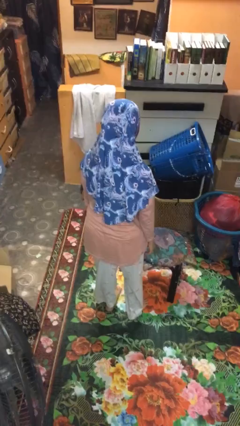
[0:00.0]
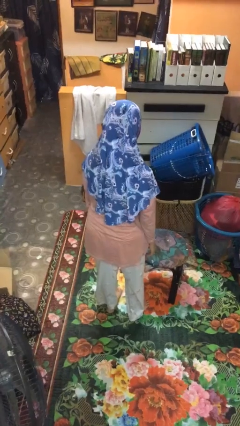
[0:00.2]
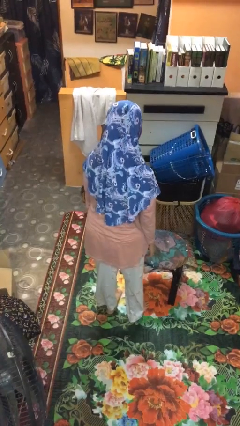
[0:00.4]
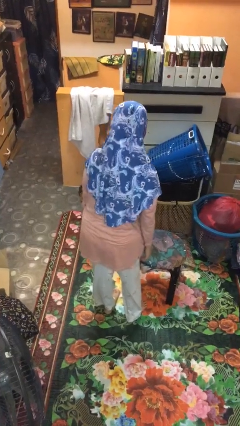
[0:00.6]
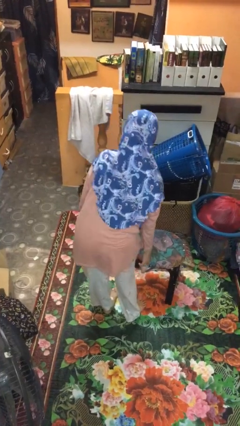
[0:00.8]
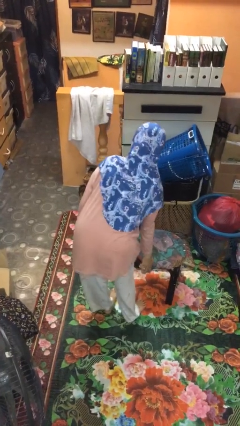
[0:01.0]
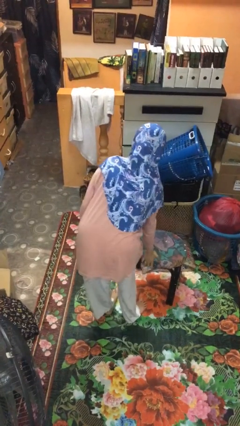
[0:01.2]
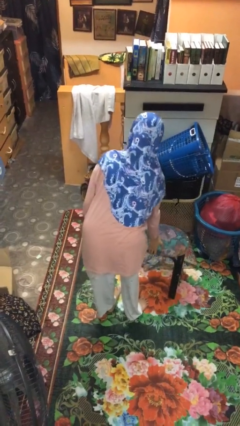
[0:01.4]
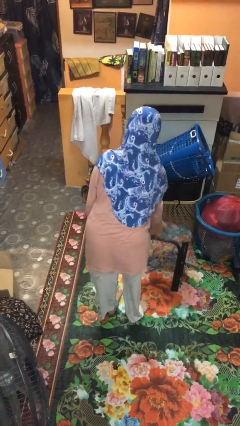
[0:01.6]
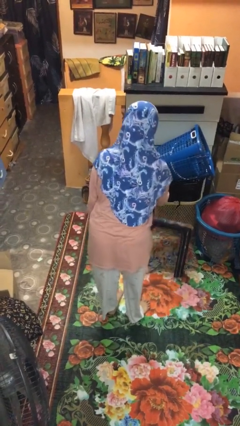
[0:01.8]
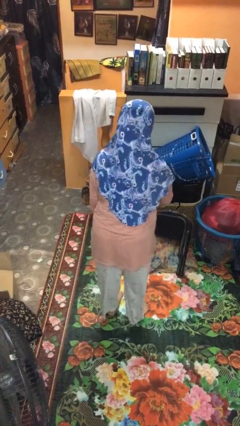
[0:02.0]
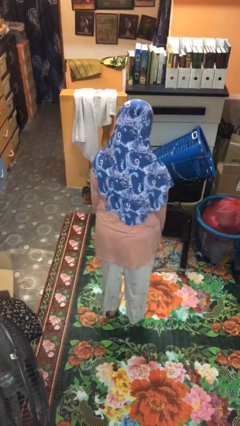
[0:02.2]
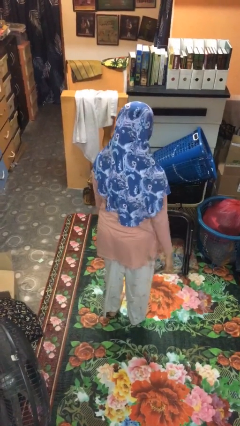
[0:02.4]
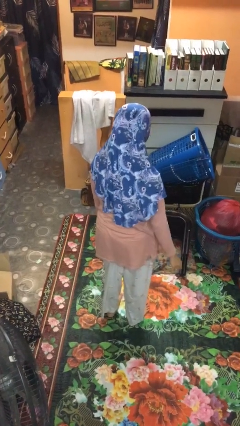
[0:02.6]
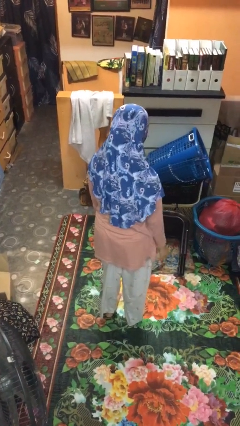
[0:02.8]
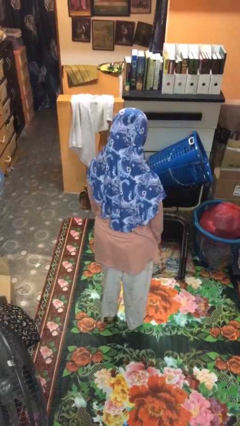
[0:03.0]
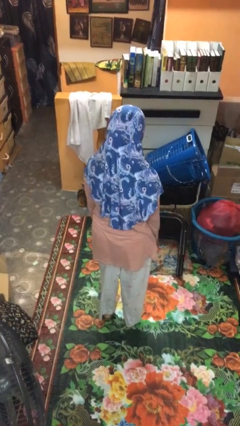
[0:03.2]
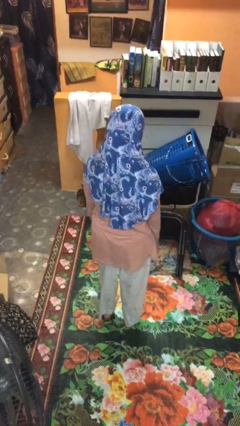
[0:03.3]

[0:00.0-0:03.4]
person knocks over furniture

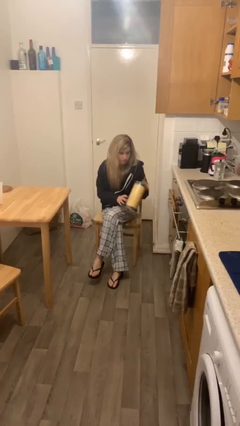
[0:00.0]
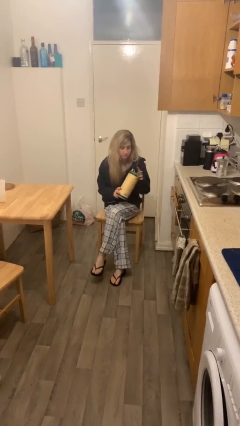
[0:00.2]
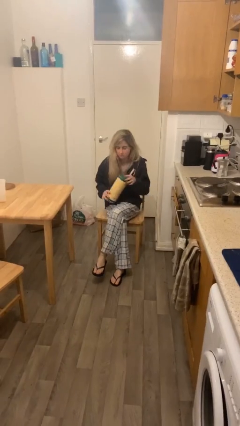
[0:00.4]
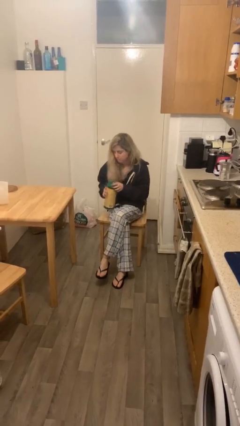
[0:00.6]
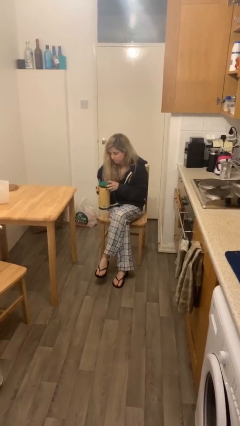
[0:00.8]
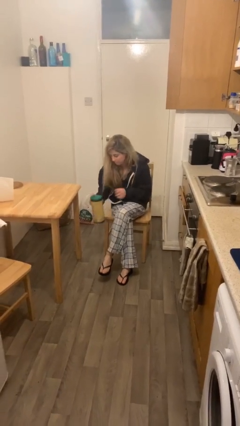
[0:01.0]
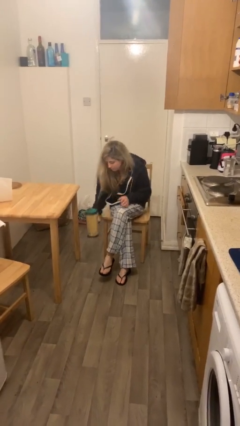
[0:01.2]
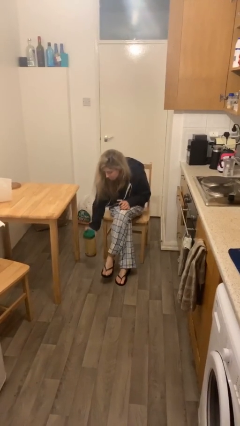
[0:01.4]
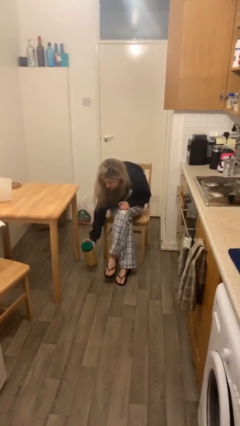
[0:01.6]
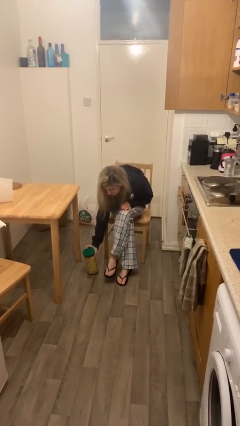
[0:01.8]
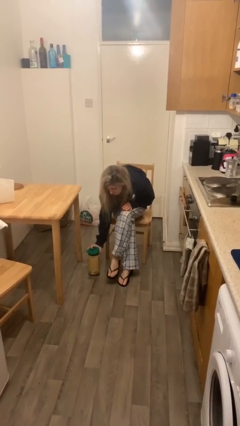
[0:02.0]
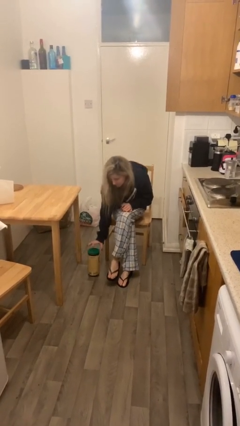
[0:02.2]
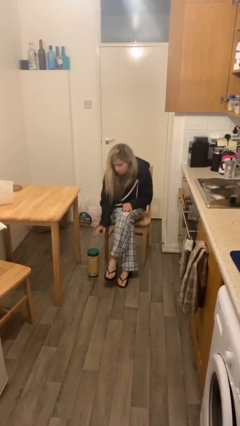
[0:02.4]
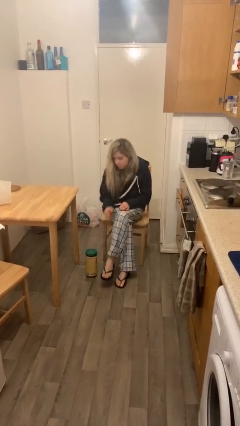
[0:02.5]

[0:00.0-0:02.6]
person puts down object on floor

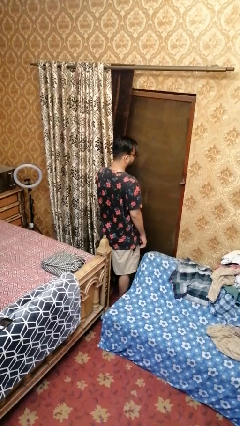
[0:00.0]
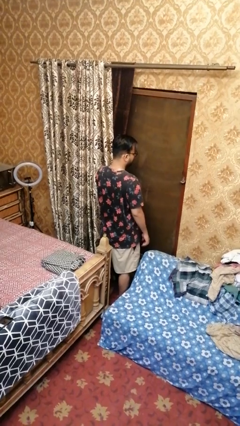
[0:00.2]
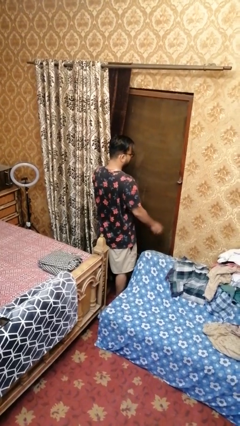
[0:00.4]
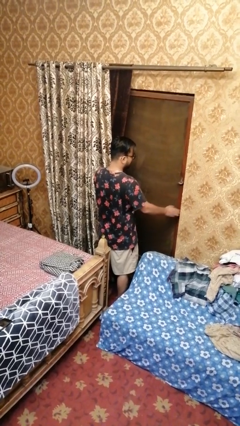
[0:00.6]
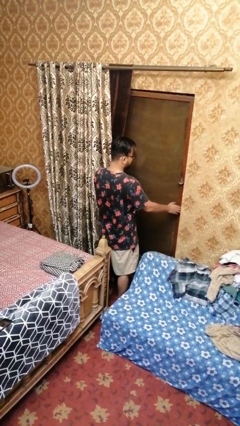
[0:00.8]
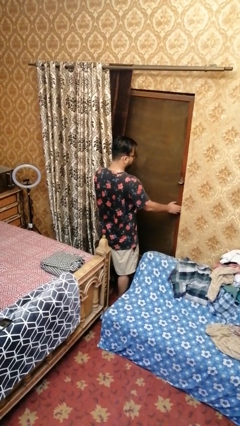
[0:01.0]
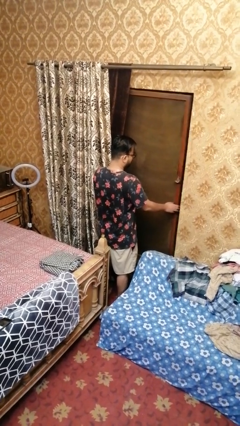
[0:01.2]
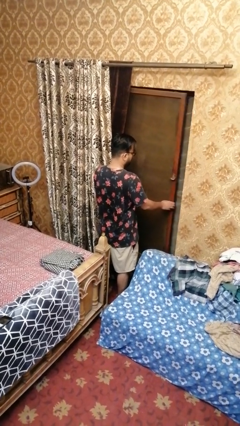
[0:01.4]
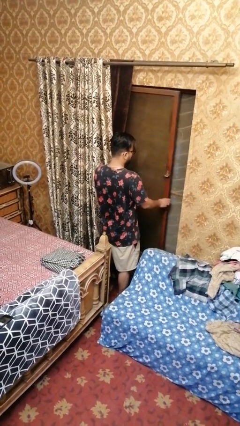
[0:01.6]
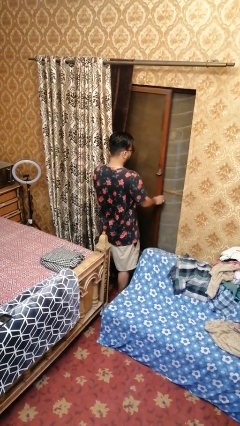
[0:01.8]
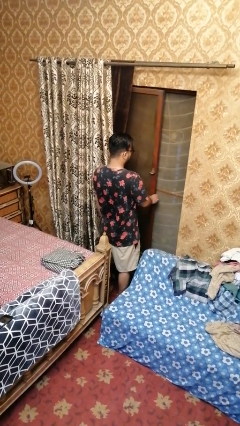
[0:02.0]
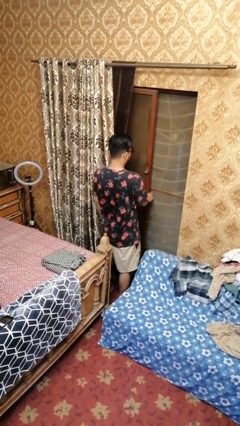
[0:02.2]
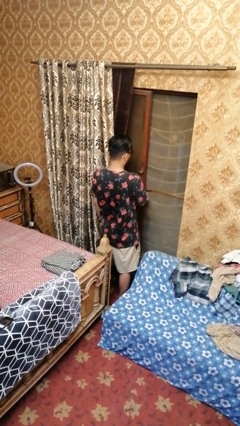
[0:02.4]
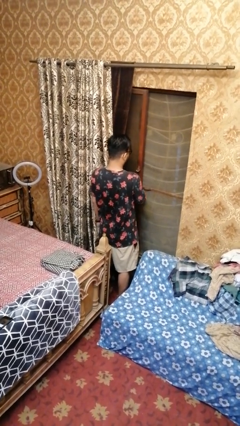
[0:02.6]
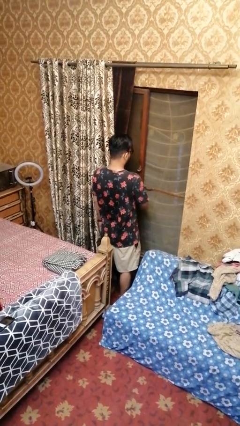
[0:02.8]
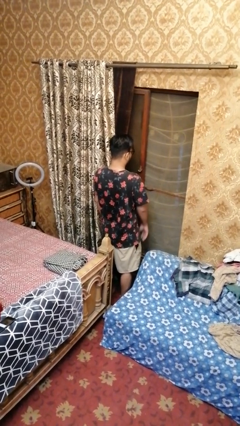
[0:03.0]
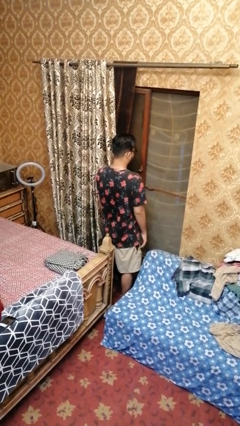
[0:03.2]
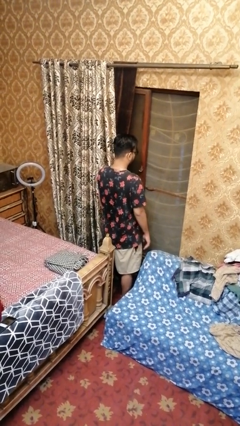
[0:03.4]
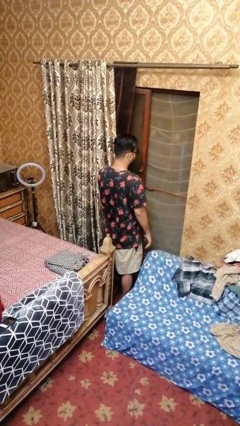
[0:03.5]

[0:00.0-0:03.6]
person opens home window

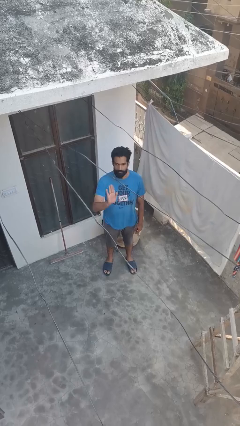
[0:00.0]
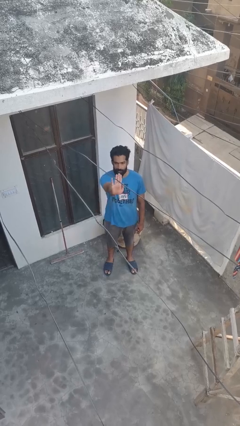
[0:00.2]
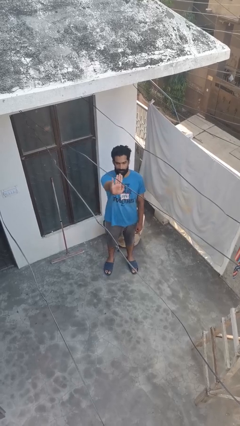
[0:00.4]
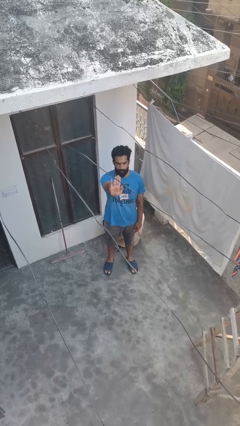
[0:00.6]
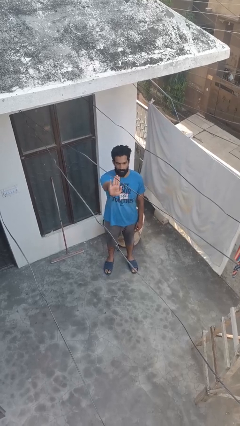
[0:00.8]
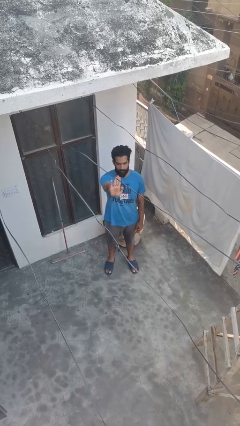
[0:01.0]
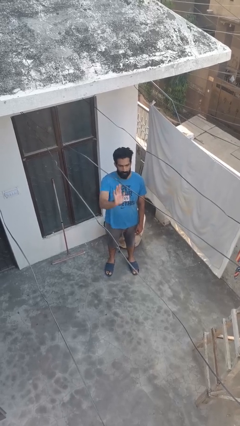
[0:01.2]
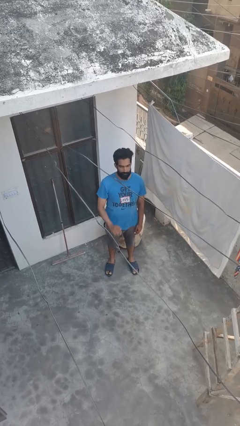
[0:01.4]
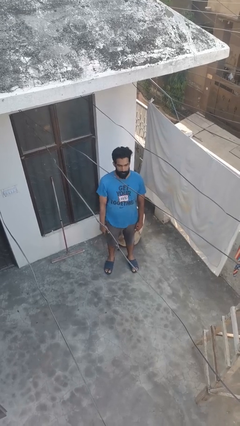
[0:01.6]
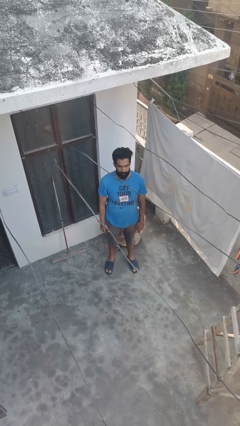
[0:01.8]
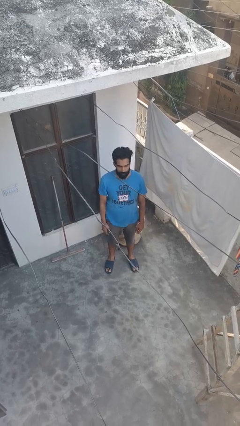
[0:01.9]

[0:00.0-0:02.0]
person gestures stop

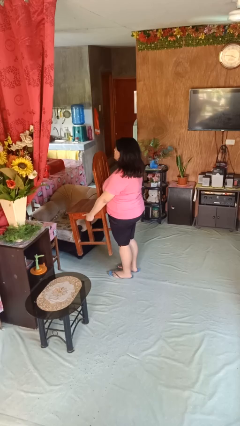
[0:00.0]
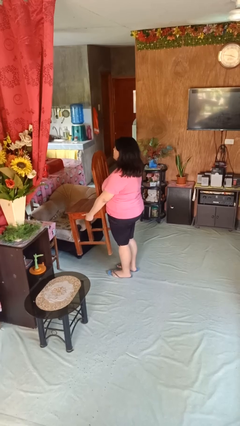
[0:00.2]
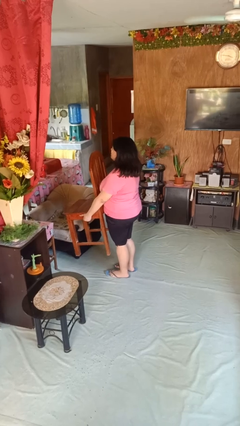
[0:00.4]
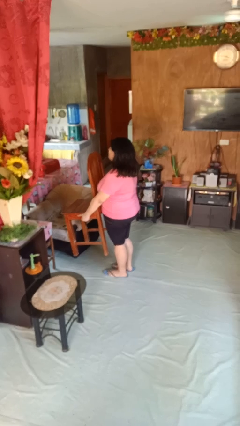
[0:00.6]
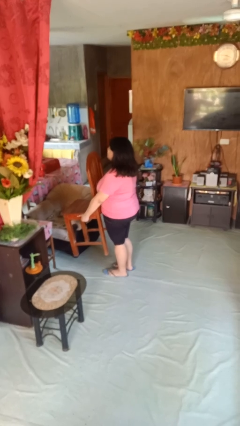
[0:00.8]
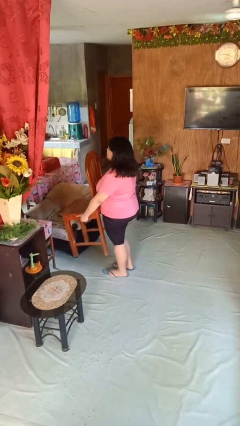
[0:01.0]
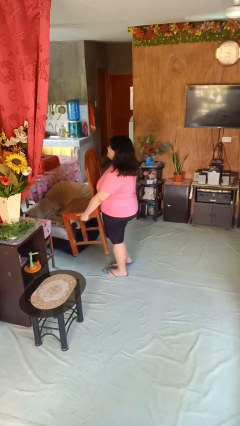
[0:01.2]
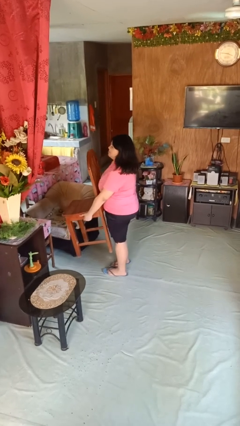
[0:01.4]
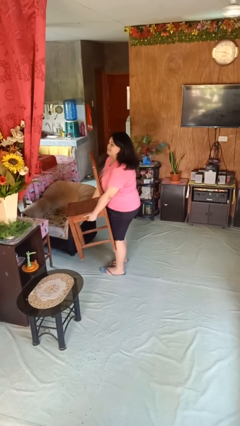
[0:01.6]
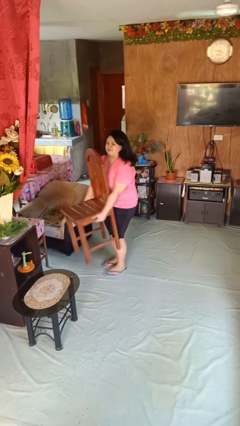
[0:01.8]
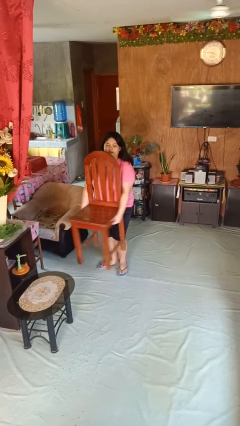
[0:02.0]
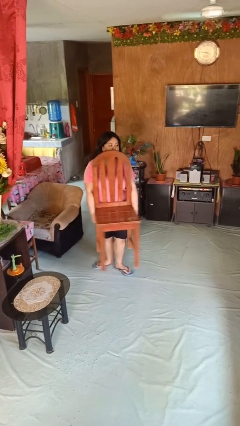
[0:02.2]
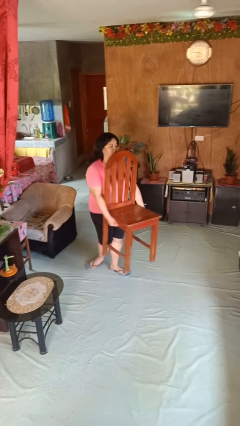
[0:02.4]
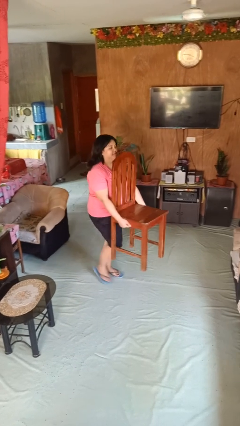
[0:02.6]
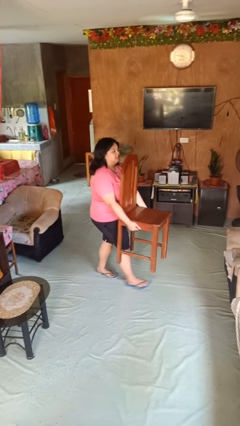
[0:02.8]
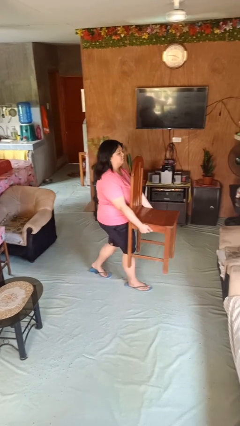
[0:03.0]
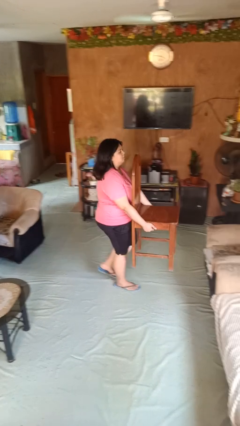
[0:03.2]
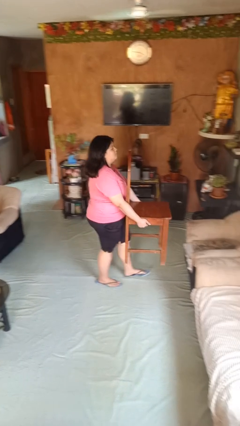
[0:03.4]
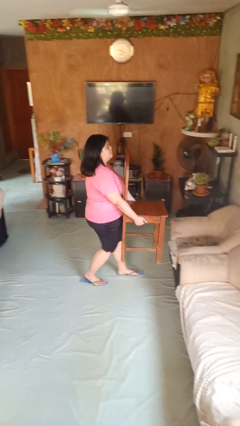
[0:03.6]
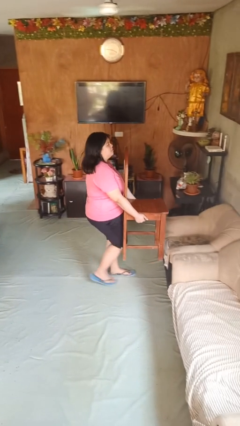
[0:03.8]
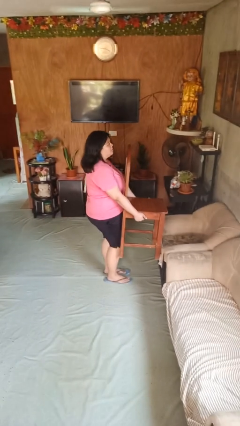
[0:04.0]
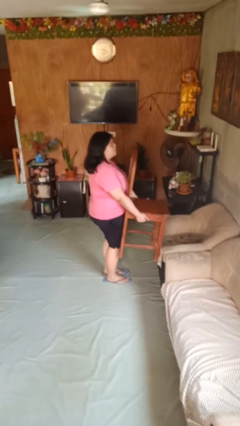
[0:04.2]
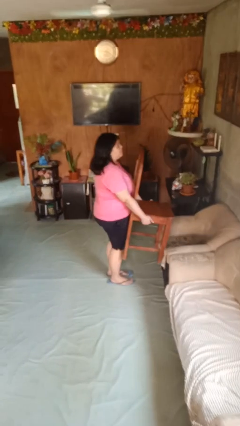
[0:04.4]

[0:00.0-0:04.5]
person carries furniture

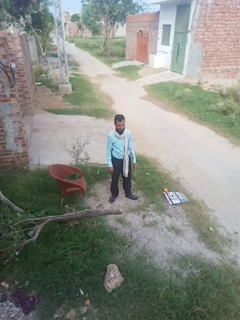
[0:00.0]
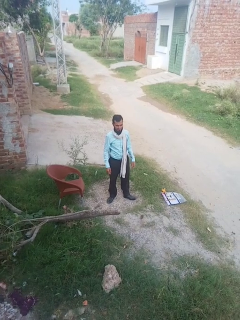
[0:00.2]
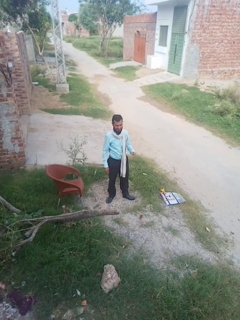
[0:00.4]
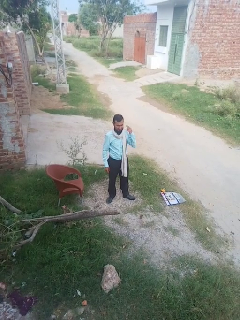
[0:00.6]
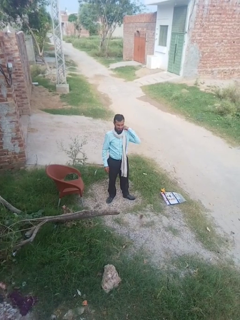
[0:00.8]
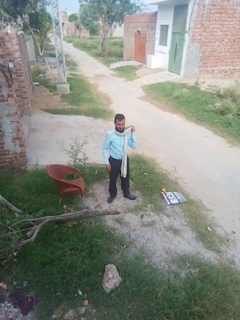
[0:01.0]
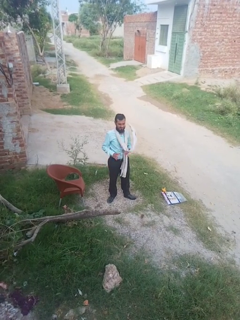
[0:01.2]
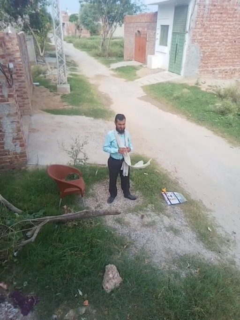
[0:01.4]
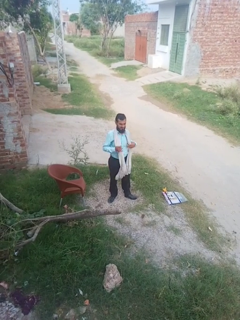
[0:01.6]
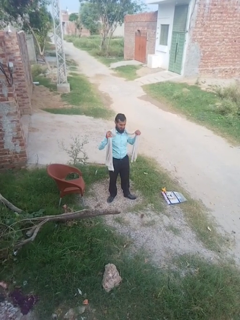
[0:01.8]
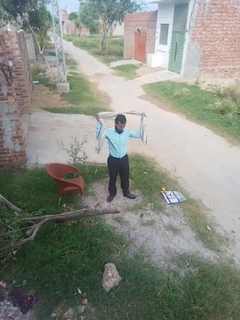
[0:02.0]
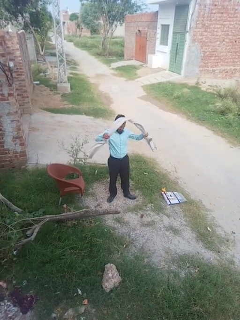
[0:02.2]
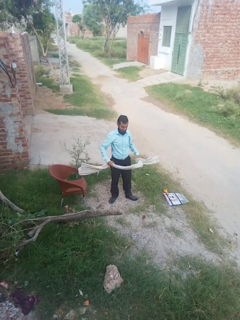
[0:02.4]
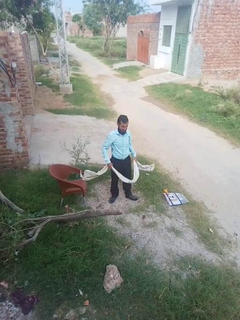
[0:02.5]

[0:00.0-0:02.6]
person takes off scarf
